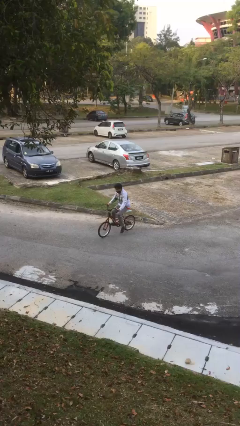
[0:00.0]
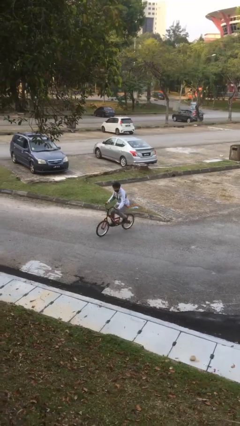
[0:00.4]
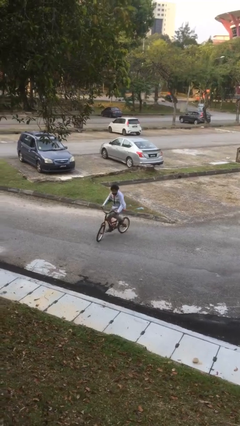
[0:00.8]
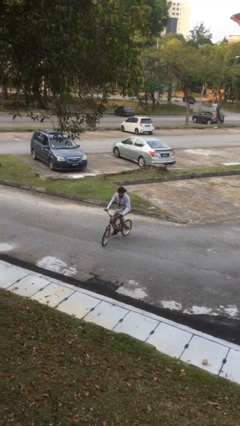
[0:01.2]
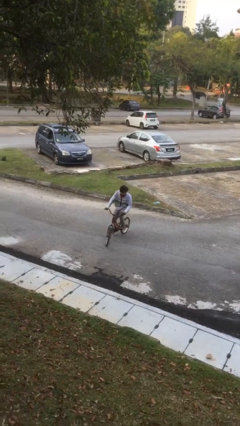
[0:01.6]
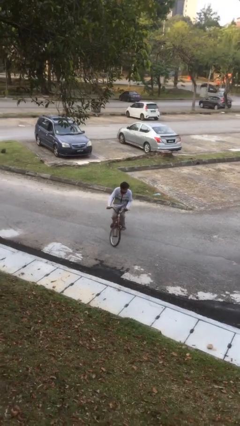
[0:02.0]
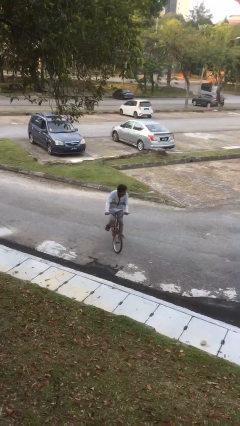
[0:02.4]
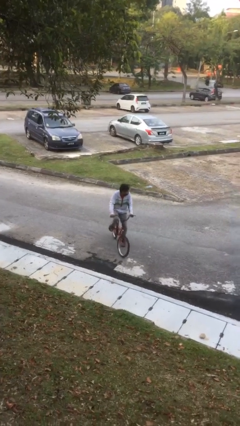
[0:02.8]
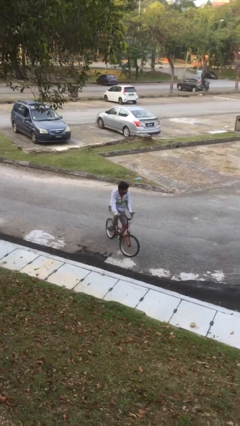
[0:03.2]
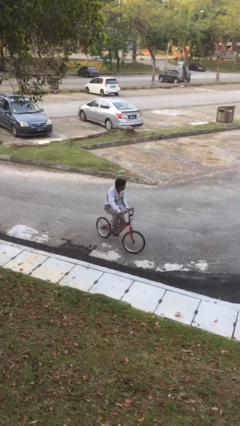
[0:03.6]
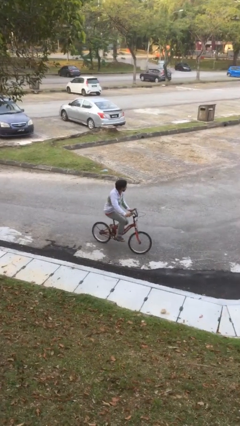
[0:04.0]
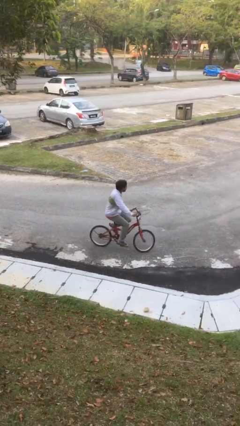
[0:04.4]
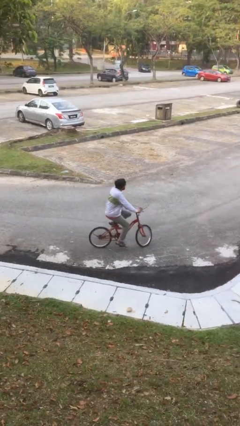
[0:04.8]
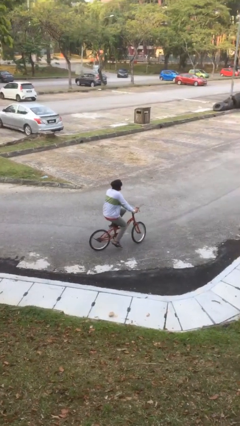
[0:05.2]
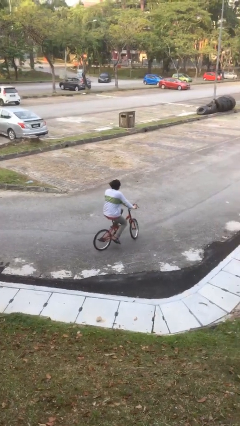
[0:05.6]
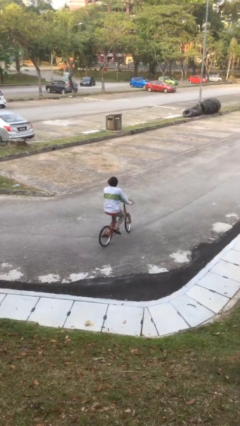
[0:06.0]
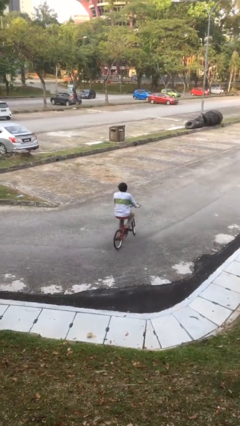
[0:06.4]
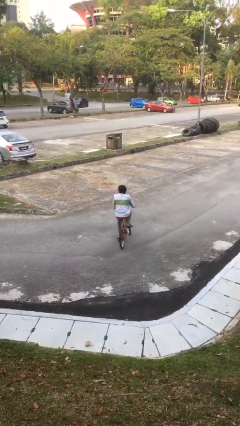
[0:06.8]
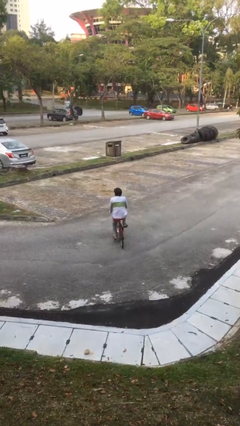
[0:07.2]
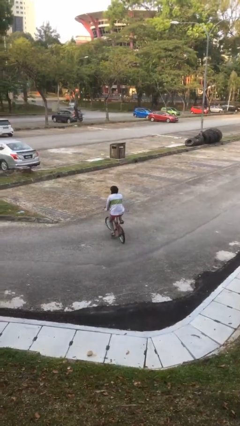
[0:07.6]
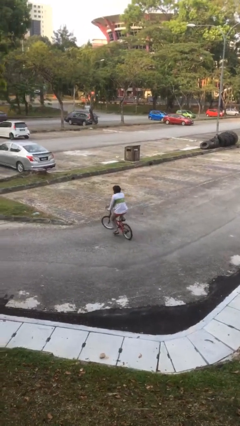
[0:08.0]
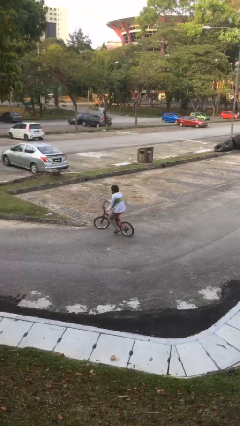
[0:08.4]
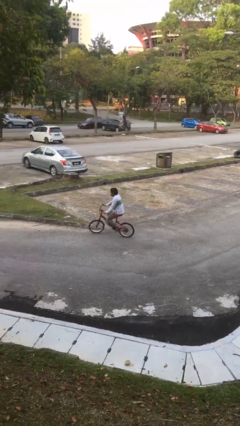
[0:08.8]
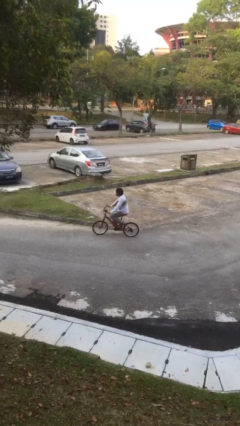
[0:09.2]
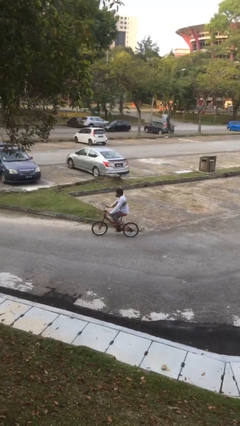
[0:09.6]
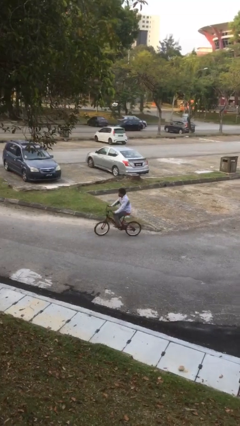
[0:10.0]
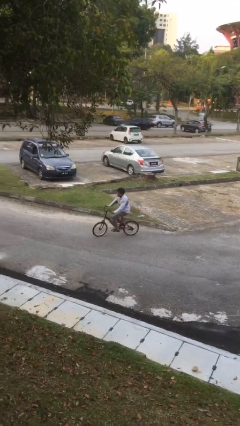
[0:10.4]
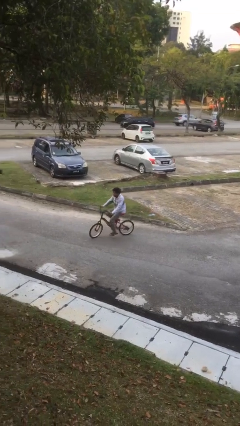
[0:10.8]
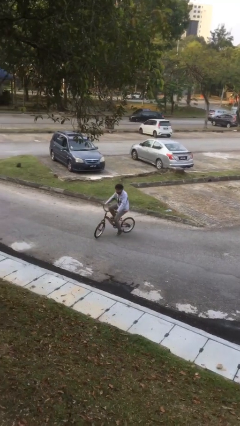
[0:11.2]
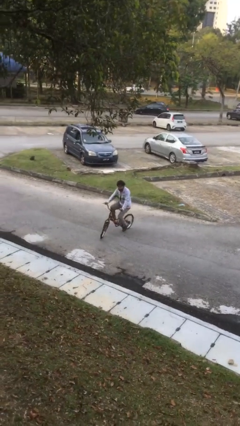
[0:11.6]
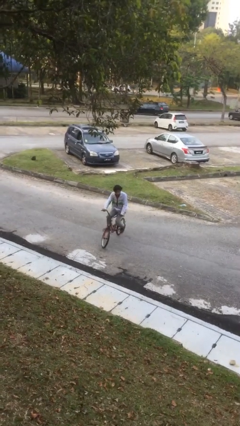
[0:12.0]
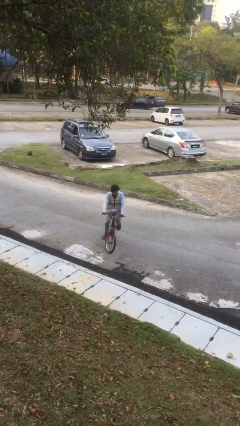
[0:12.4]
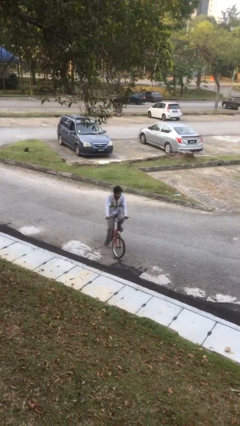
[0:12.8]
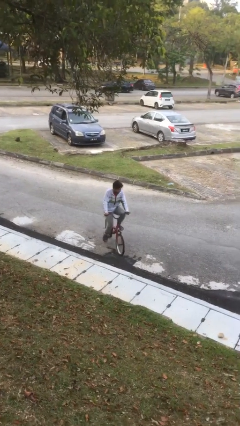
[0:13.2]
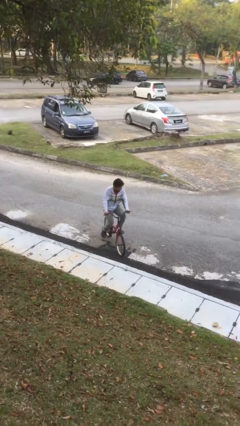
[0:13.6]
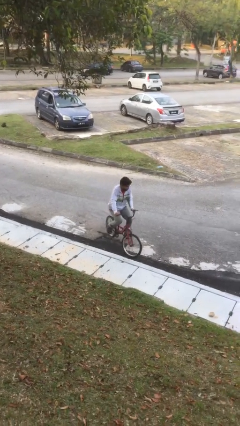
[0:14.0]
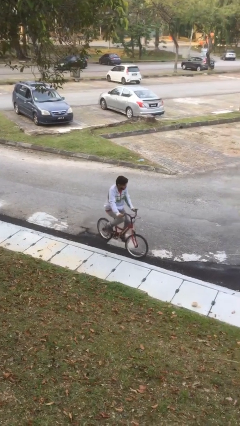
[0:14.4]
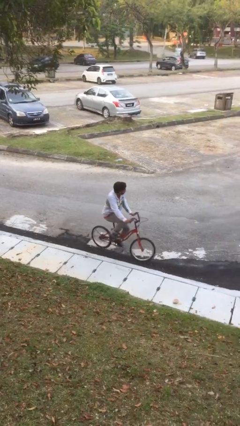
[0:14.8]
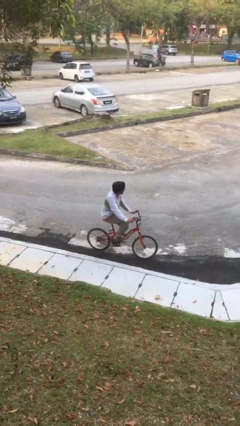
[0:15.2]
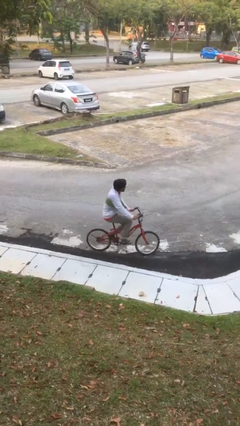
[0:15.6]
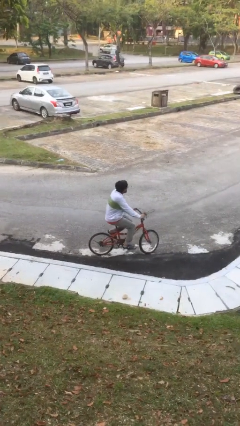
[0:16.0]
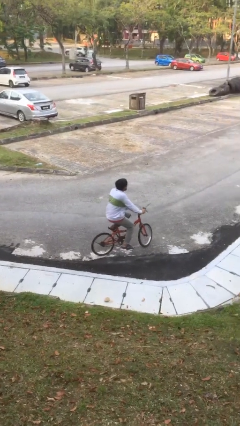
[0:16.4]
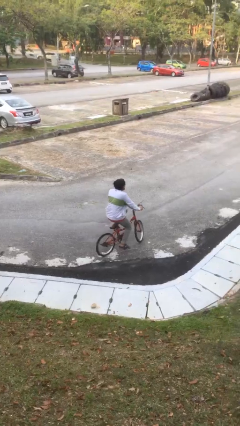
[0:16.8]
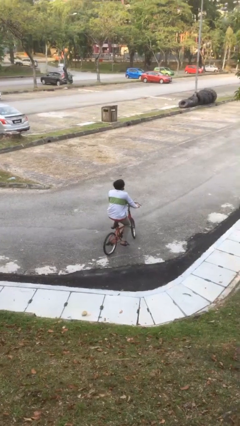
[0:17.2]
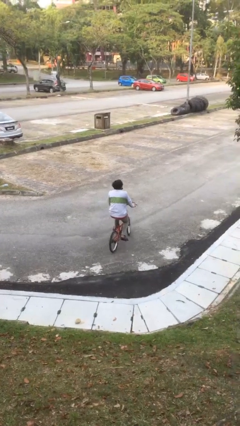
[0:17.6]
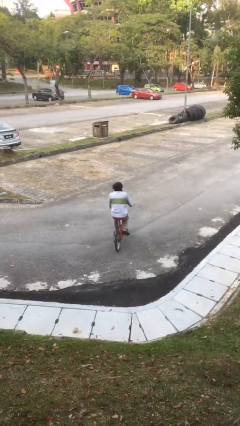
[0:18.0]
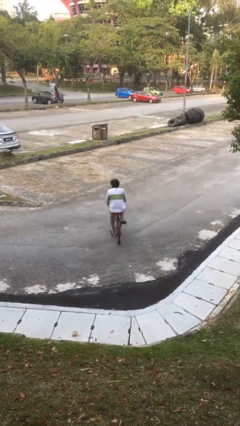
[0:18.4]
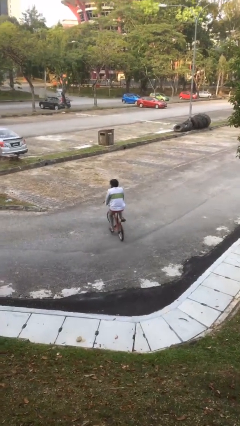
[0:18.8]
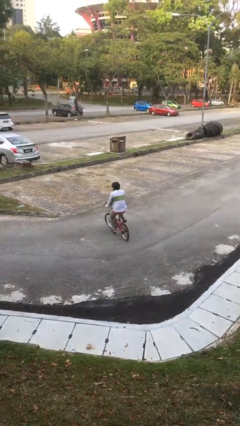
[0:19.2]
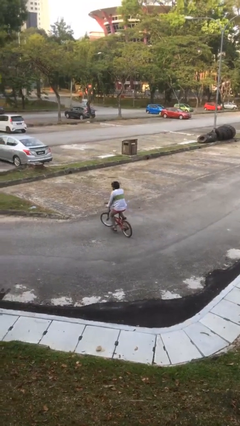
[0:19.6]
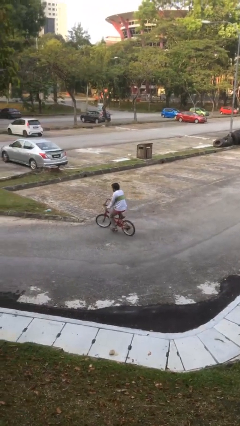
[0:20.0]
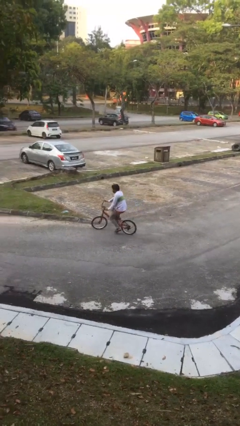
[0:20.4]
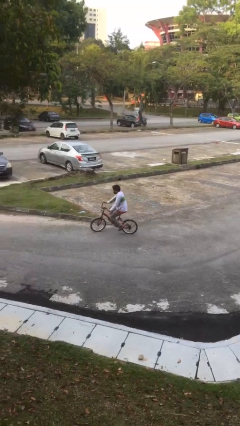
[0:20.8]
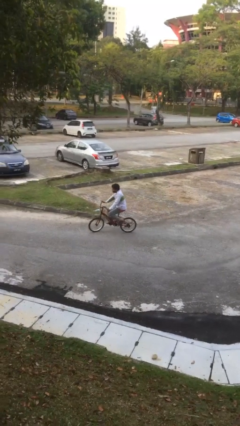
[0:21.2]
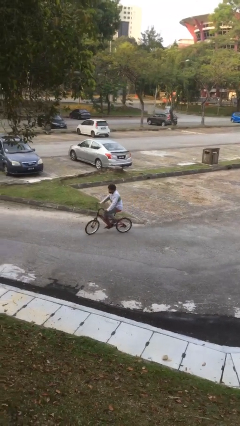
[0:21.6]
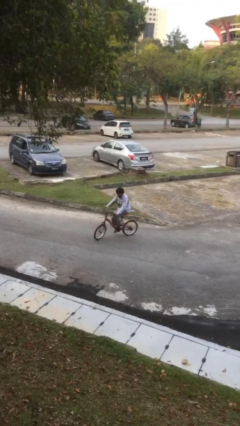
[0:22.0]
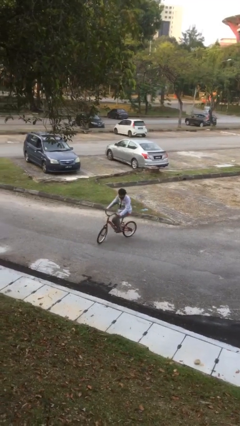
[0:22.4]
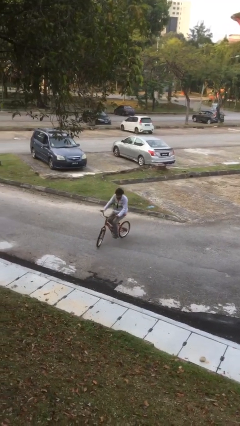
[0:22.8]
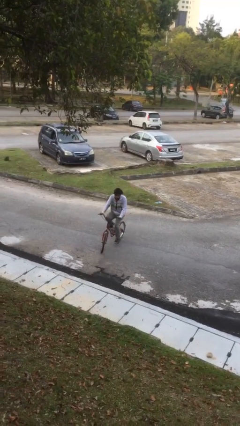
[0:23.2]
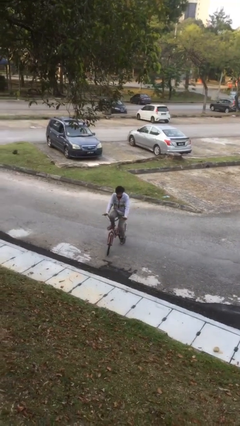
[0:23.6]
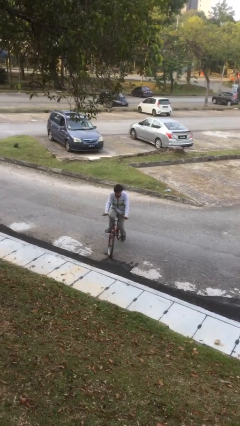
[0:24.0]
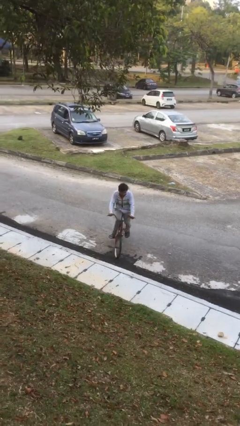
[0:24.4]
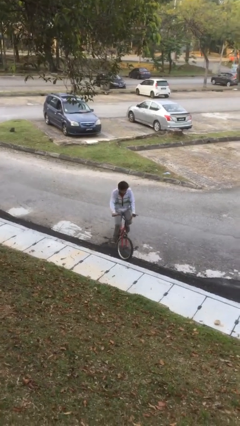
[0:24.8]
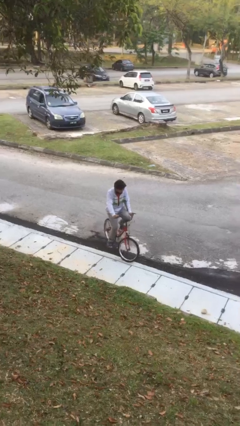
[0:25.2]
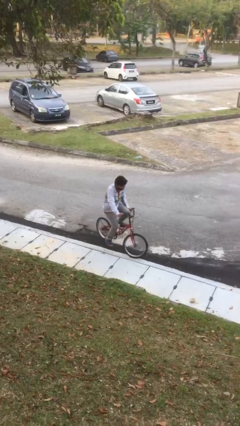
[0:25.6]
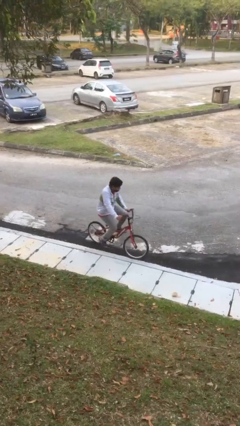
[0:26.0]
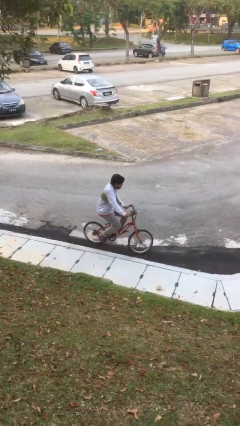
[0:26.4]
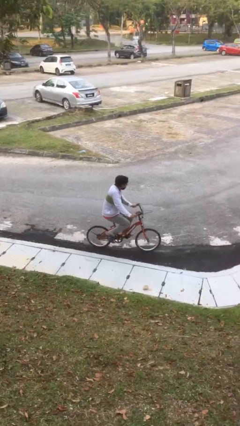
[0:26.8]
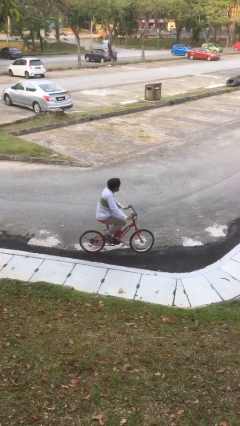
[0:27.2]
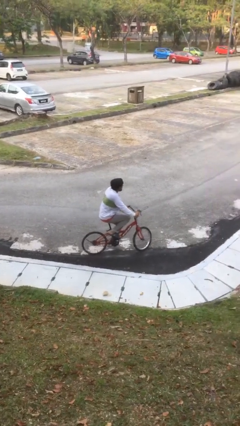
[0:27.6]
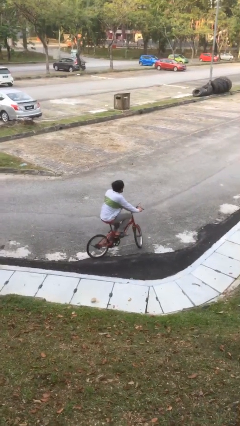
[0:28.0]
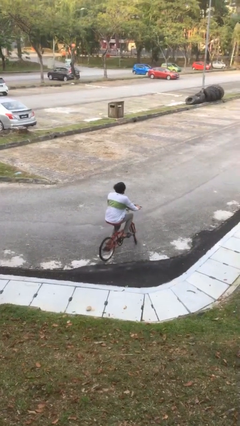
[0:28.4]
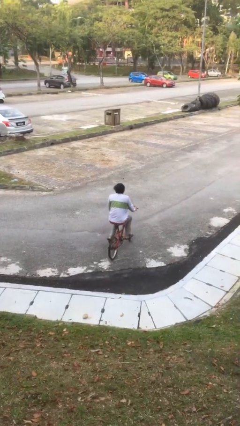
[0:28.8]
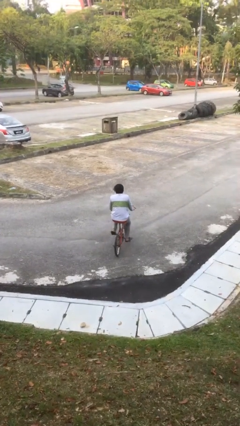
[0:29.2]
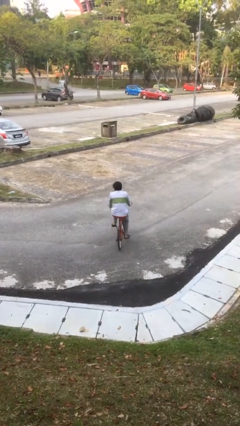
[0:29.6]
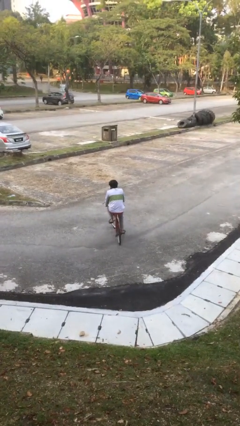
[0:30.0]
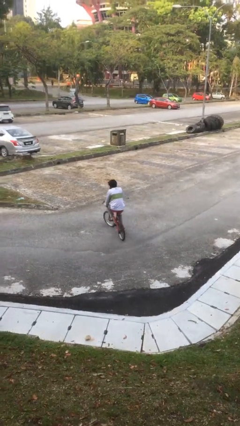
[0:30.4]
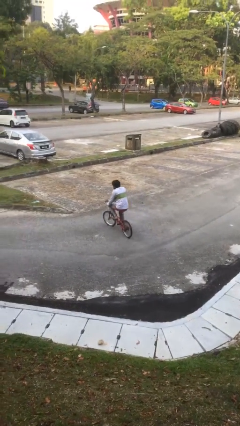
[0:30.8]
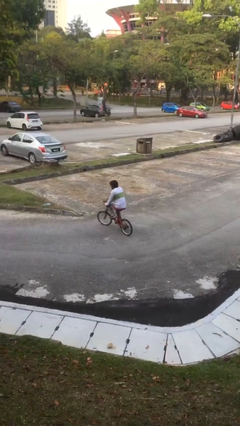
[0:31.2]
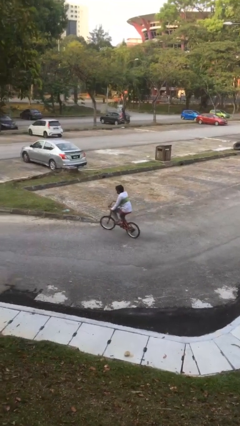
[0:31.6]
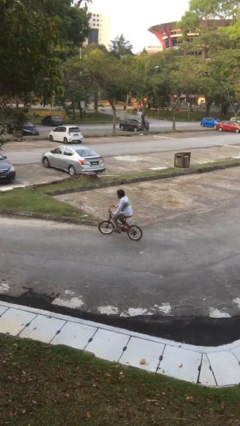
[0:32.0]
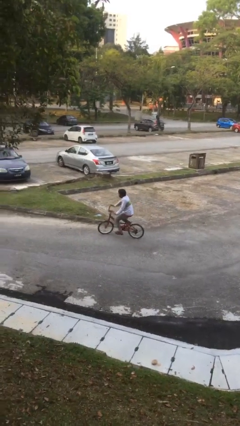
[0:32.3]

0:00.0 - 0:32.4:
person rides bicycle

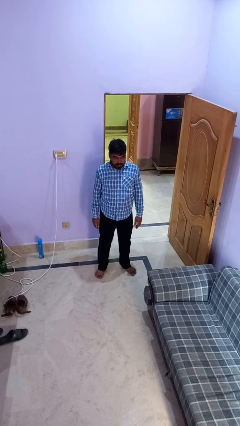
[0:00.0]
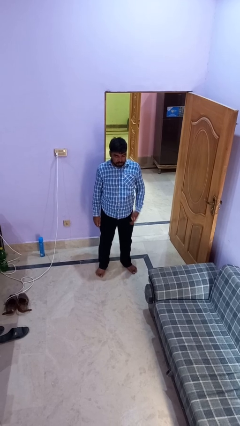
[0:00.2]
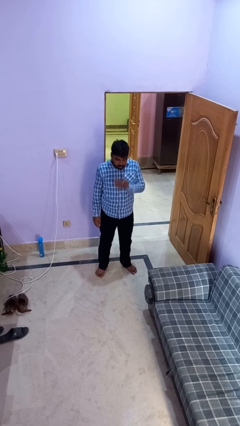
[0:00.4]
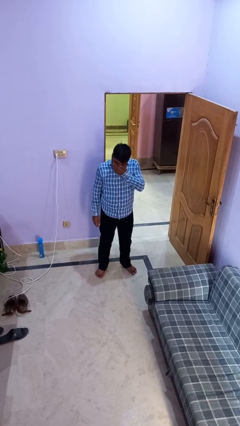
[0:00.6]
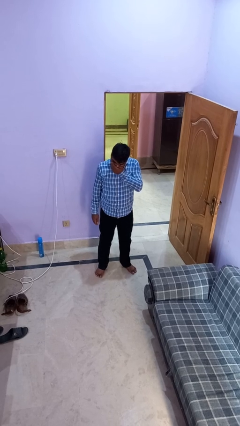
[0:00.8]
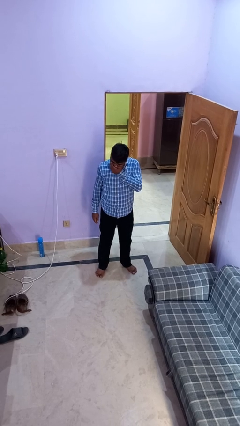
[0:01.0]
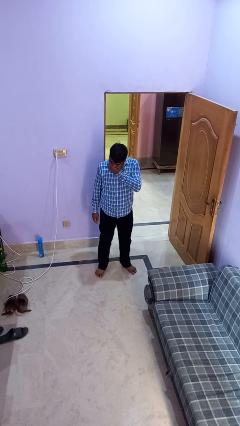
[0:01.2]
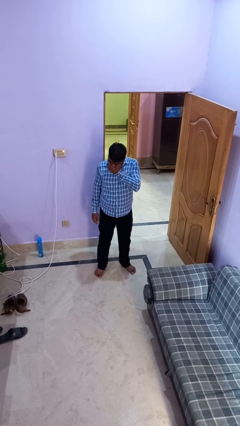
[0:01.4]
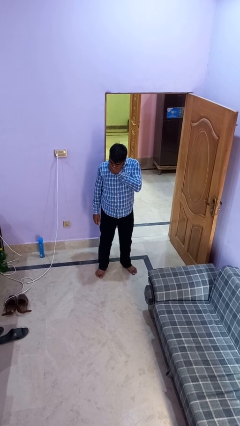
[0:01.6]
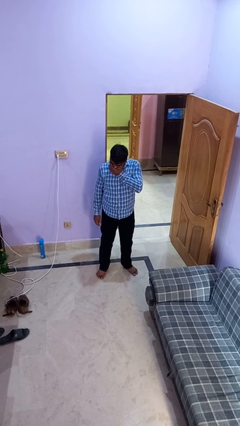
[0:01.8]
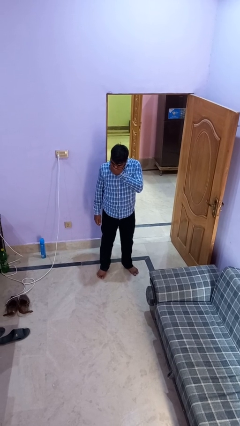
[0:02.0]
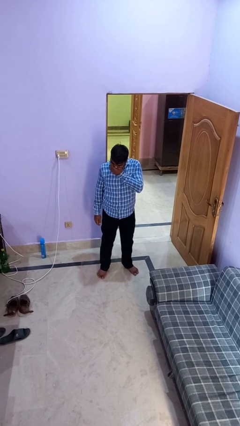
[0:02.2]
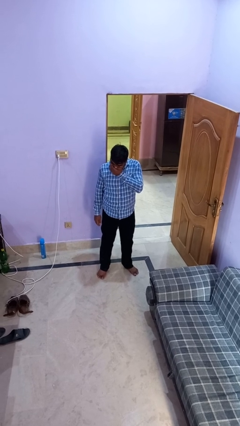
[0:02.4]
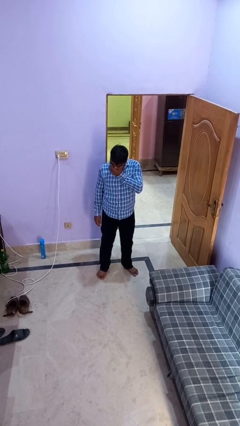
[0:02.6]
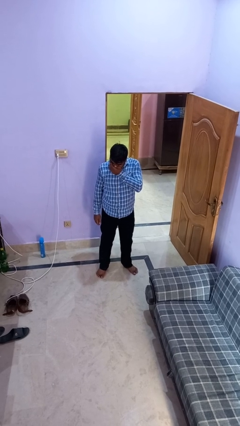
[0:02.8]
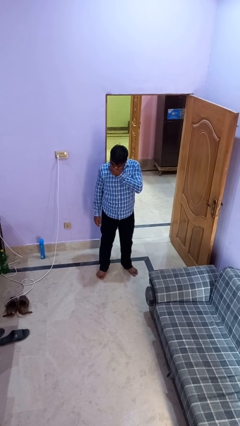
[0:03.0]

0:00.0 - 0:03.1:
person sneezes into hand
